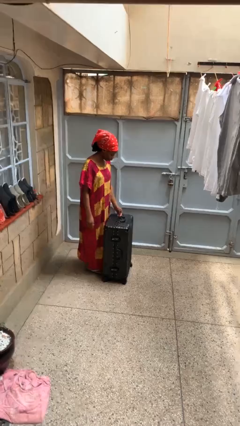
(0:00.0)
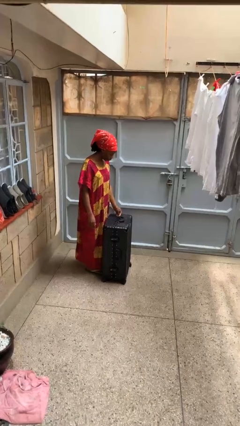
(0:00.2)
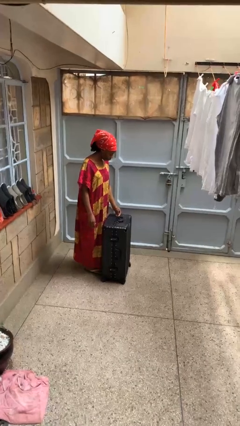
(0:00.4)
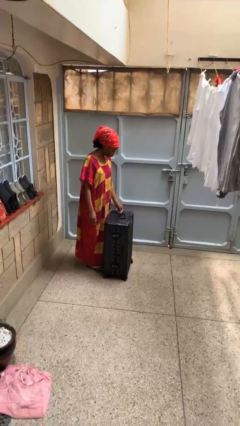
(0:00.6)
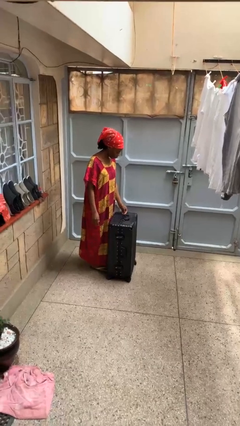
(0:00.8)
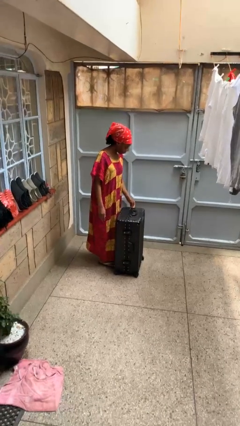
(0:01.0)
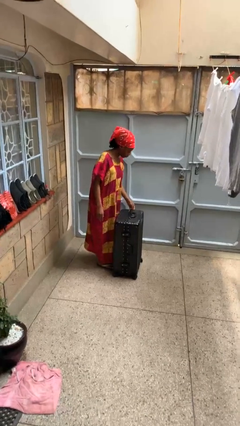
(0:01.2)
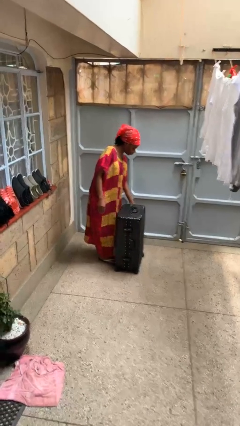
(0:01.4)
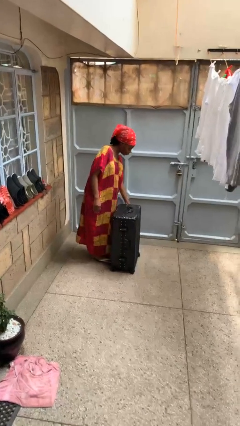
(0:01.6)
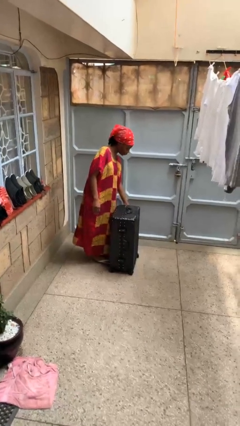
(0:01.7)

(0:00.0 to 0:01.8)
person opens suitcase

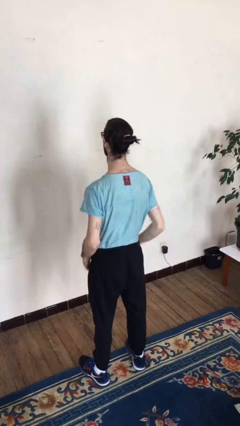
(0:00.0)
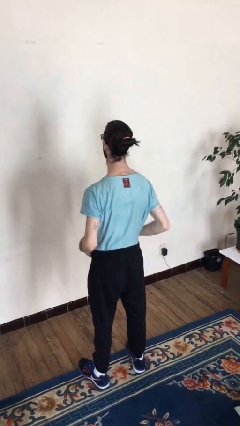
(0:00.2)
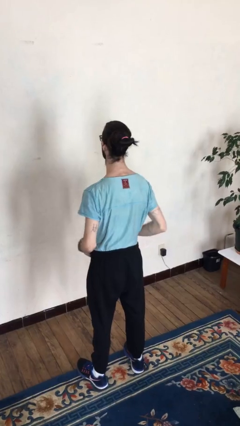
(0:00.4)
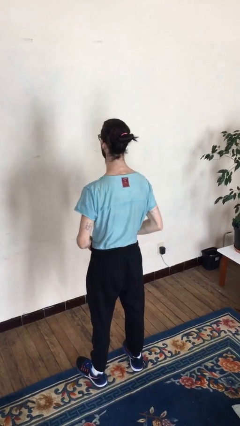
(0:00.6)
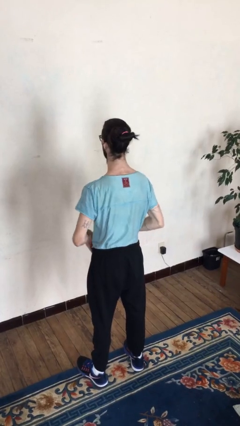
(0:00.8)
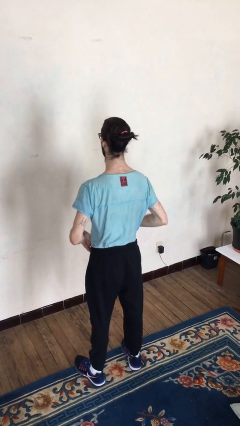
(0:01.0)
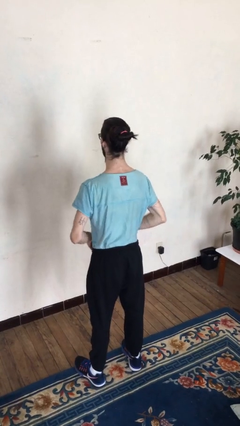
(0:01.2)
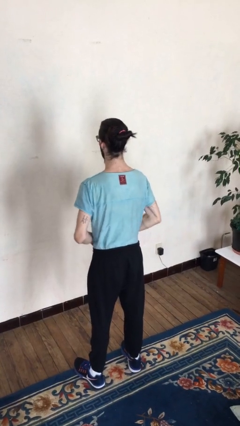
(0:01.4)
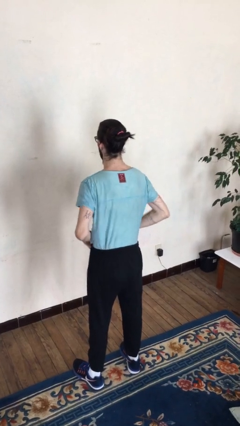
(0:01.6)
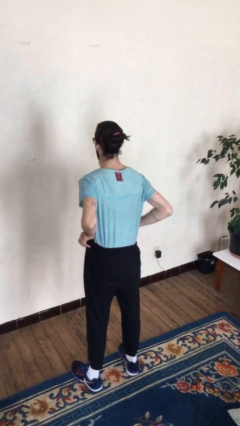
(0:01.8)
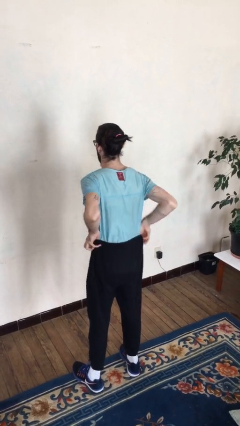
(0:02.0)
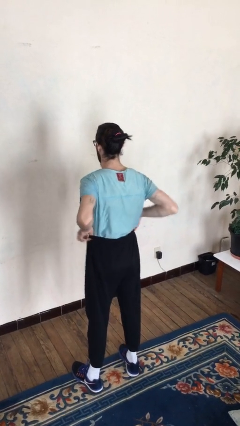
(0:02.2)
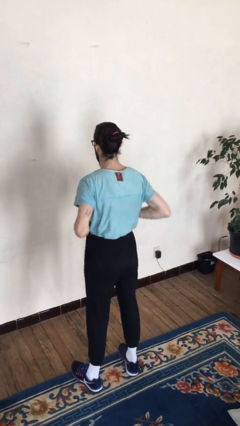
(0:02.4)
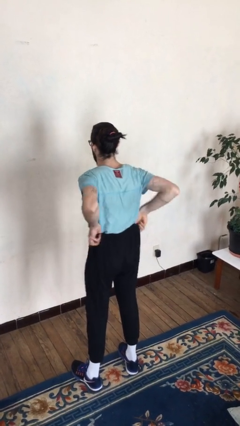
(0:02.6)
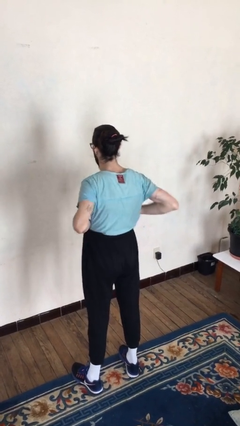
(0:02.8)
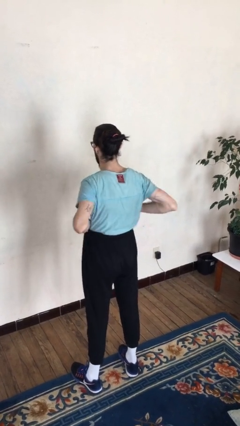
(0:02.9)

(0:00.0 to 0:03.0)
person hikes up pants

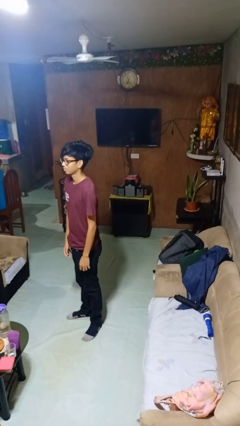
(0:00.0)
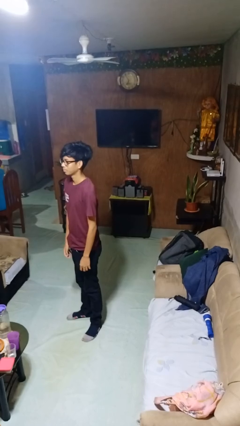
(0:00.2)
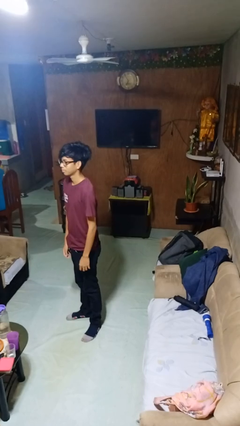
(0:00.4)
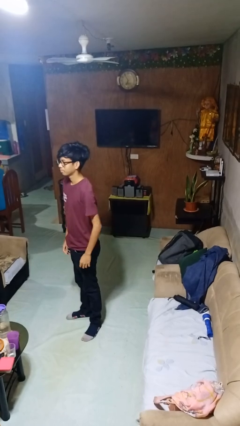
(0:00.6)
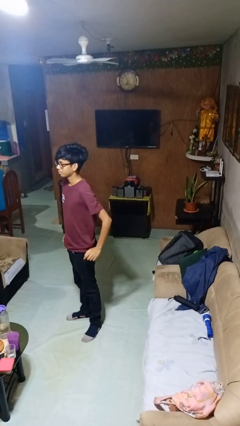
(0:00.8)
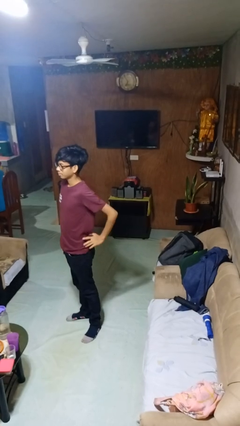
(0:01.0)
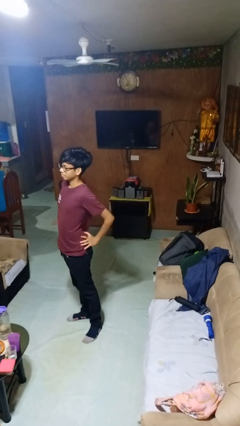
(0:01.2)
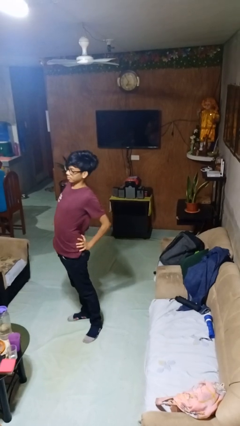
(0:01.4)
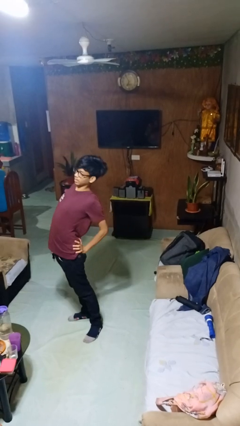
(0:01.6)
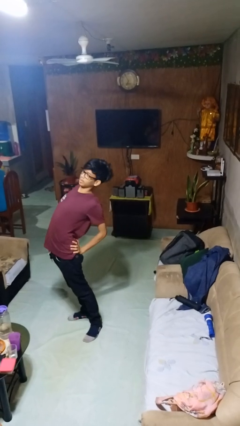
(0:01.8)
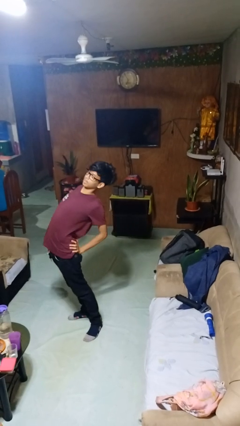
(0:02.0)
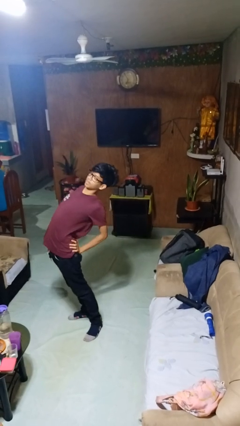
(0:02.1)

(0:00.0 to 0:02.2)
person stretches back

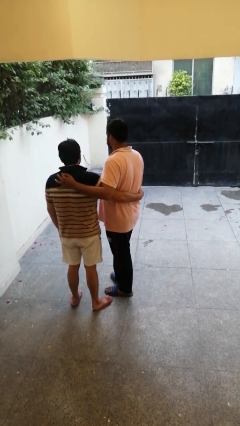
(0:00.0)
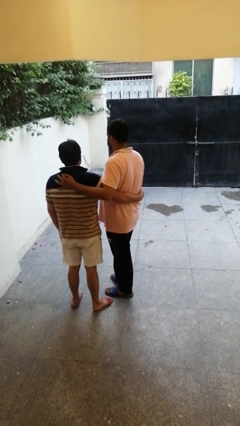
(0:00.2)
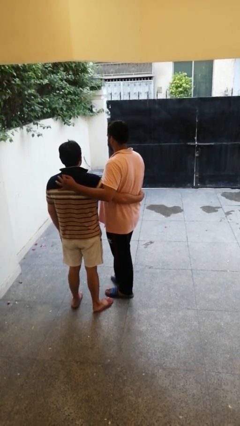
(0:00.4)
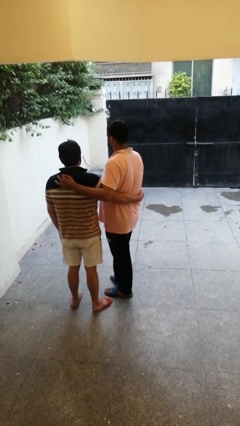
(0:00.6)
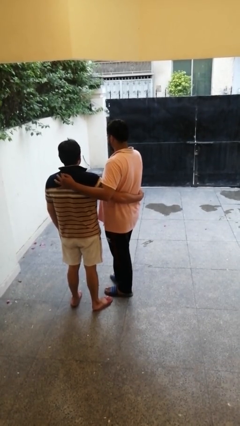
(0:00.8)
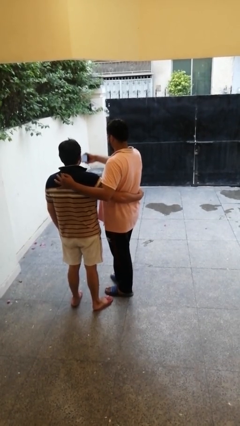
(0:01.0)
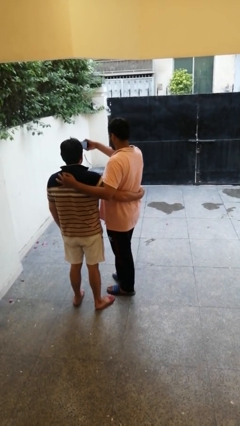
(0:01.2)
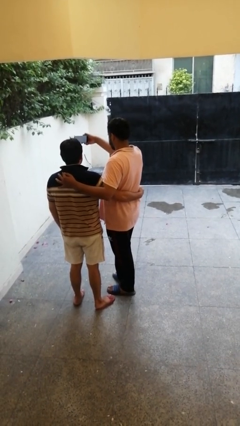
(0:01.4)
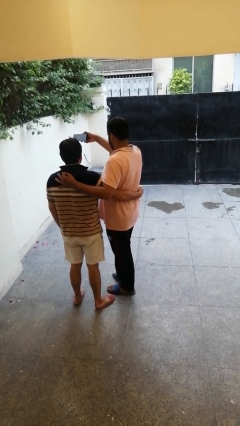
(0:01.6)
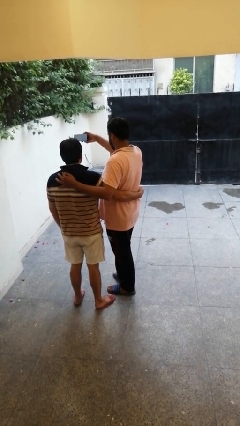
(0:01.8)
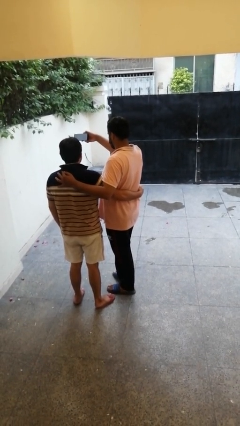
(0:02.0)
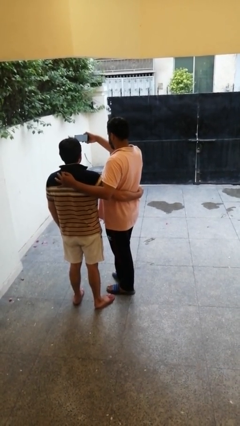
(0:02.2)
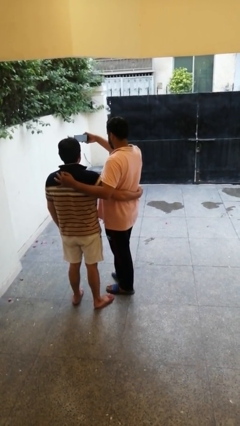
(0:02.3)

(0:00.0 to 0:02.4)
person takes selfie with person

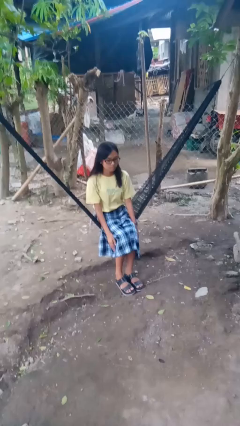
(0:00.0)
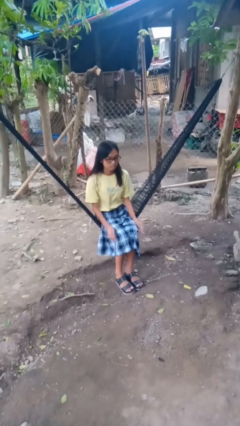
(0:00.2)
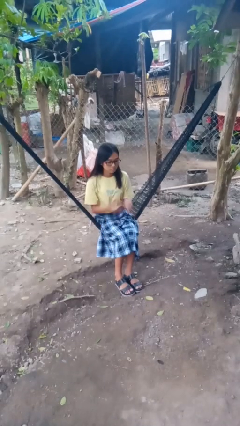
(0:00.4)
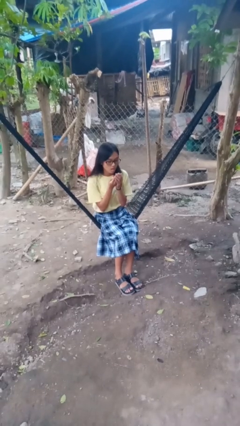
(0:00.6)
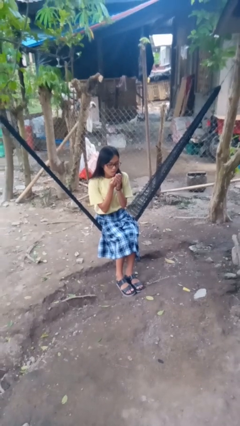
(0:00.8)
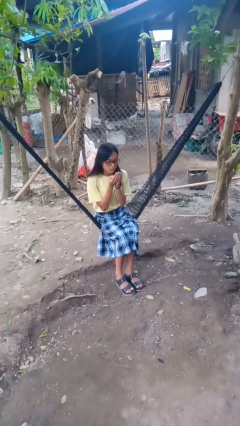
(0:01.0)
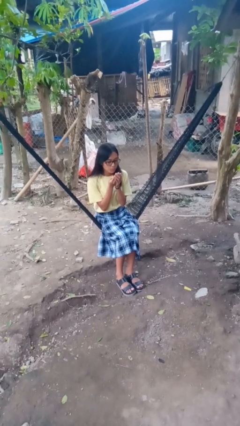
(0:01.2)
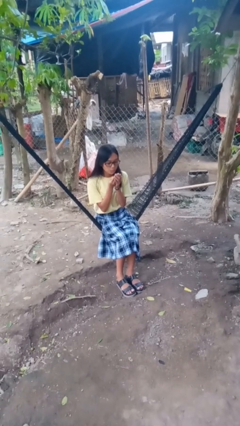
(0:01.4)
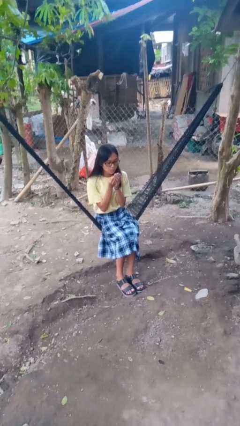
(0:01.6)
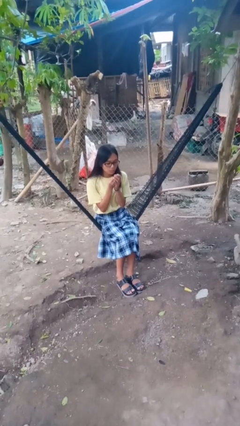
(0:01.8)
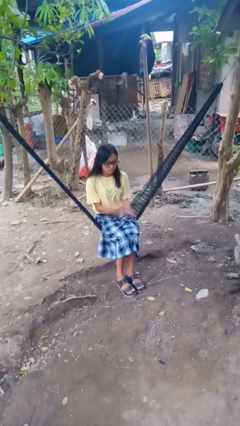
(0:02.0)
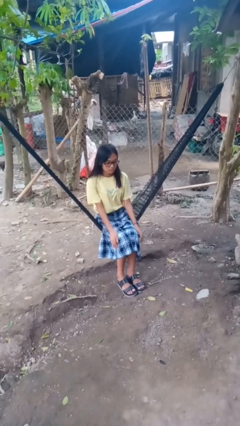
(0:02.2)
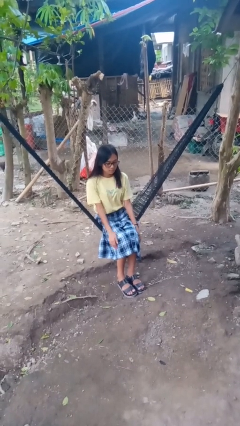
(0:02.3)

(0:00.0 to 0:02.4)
person blows into hands

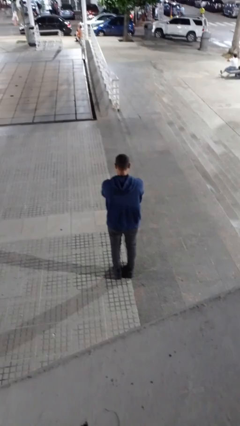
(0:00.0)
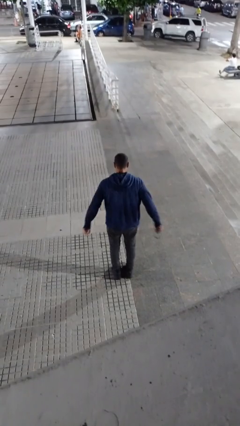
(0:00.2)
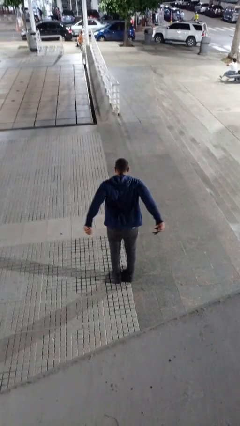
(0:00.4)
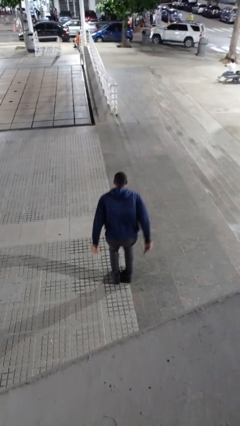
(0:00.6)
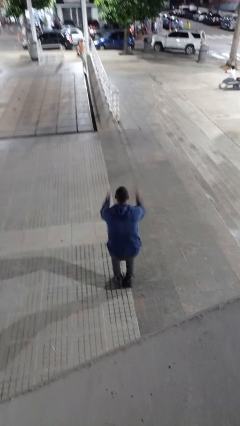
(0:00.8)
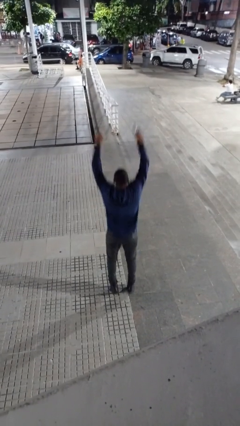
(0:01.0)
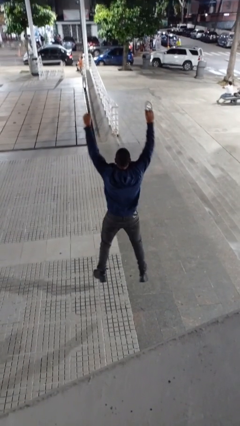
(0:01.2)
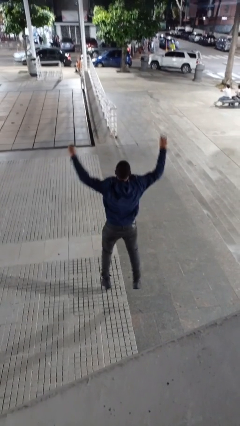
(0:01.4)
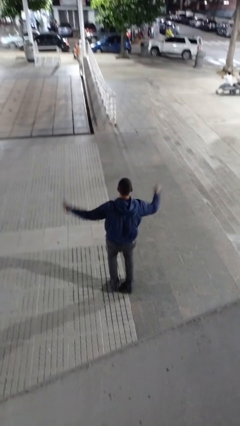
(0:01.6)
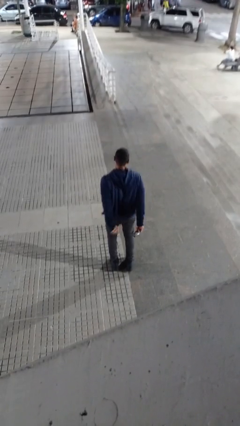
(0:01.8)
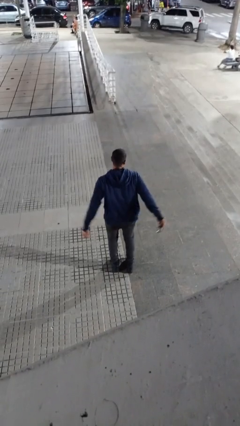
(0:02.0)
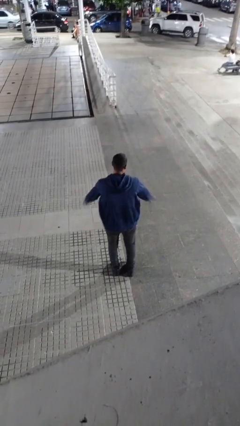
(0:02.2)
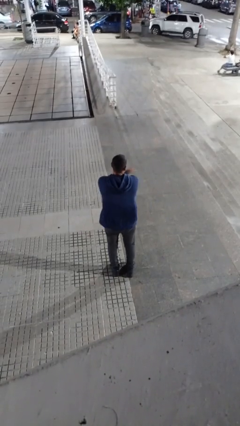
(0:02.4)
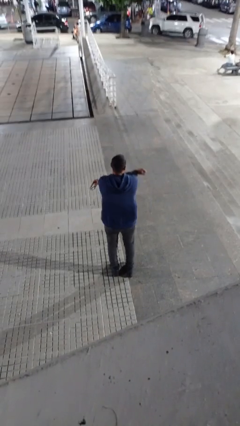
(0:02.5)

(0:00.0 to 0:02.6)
person jumps

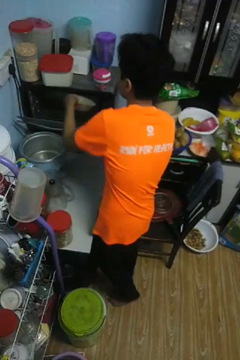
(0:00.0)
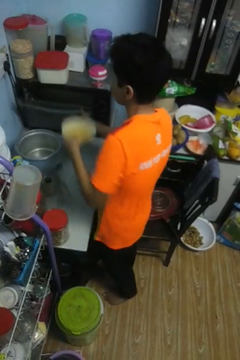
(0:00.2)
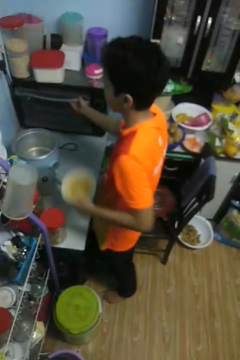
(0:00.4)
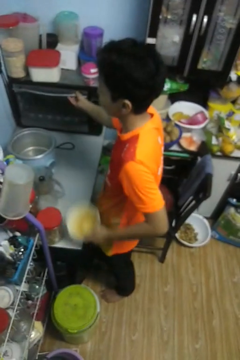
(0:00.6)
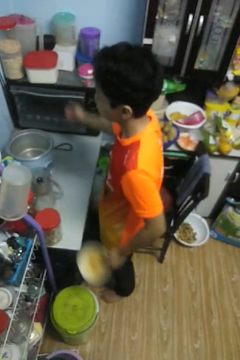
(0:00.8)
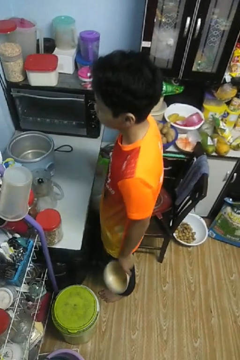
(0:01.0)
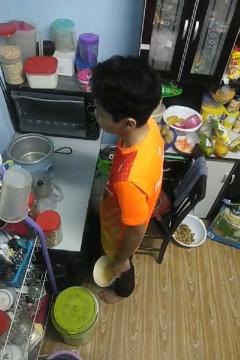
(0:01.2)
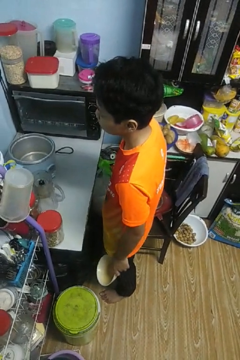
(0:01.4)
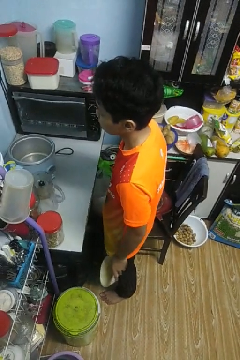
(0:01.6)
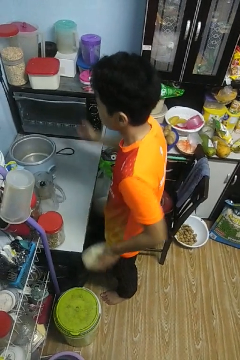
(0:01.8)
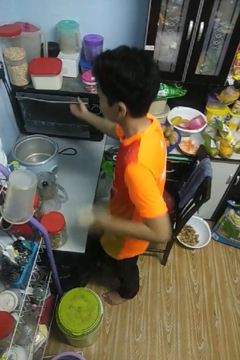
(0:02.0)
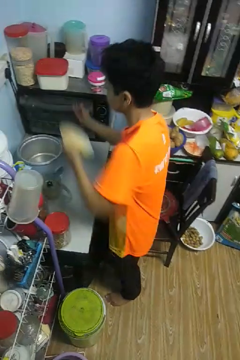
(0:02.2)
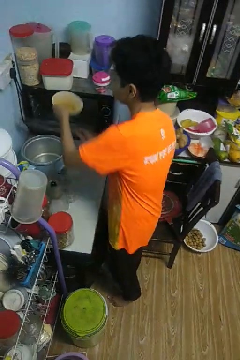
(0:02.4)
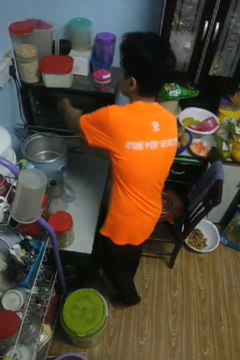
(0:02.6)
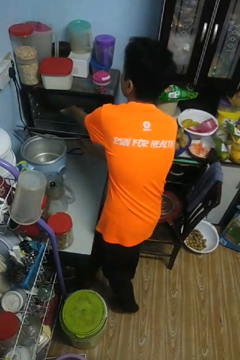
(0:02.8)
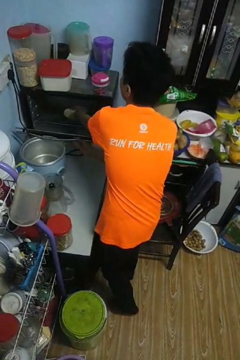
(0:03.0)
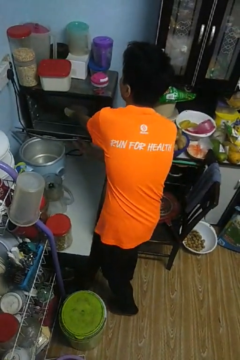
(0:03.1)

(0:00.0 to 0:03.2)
person puts object into oven
